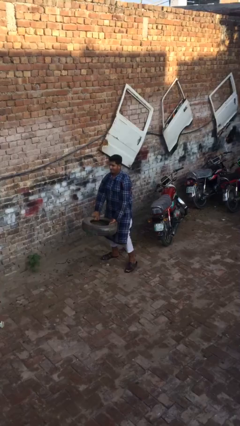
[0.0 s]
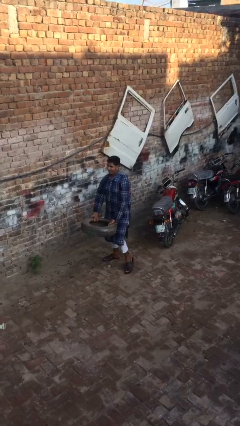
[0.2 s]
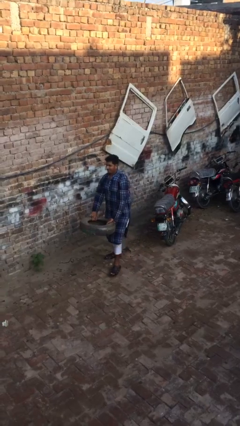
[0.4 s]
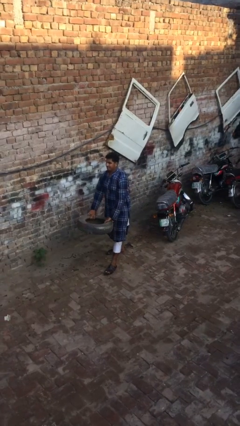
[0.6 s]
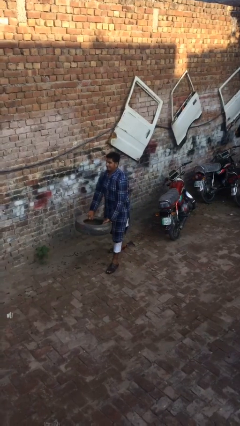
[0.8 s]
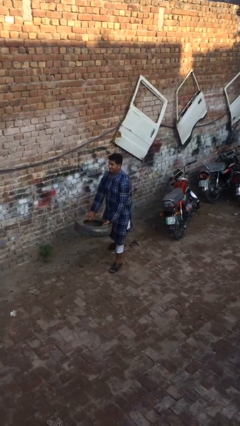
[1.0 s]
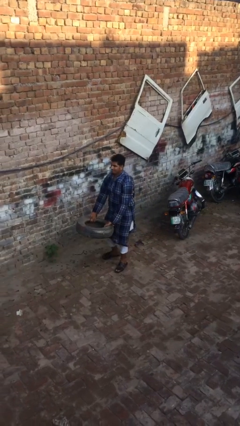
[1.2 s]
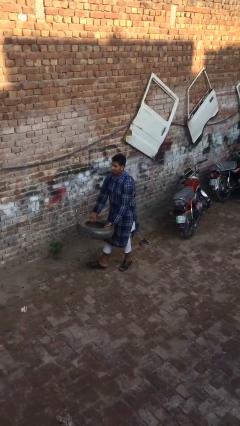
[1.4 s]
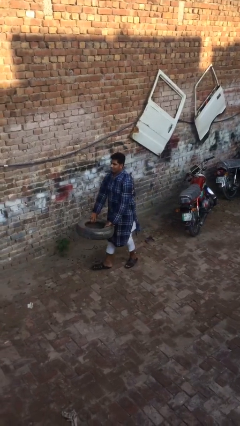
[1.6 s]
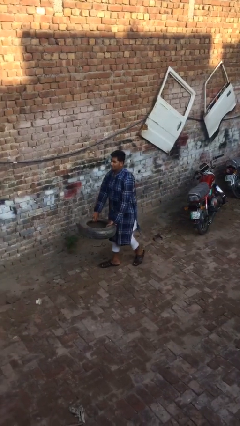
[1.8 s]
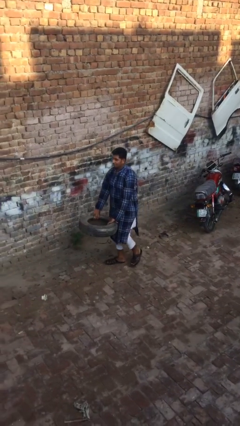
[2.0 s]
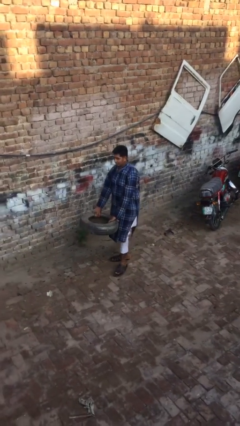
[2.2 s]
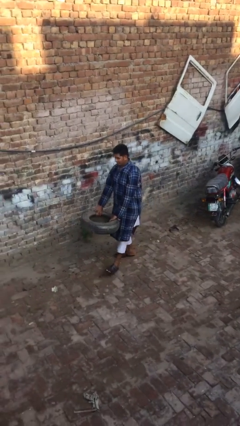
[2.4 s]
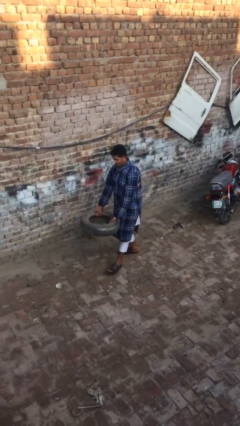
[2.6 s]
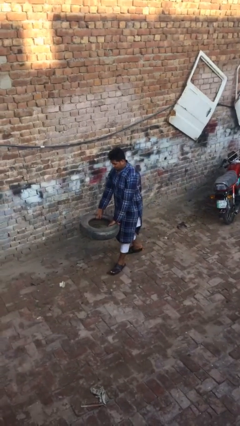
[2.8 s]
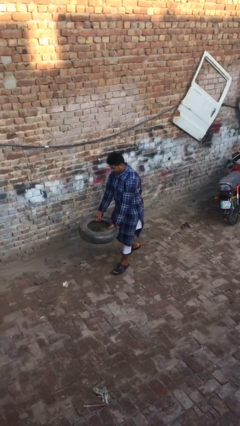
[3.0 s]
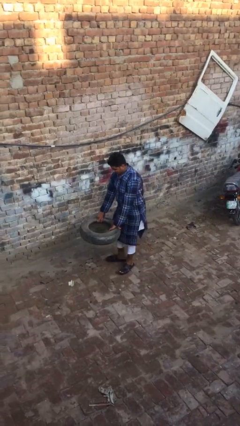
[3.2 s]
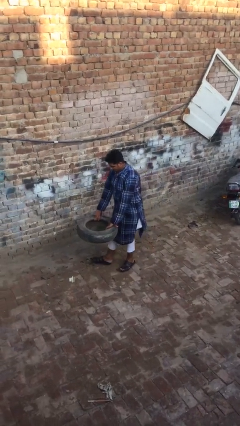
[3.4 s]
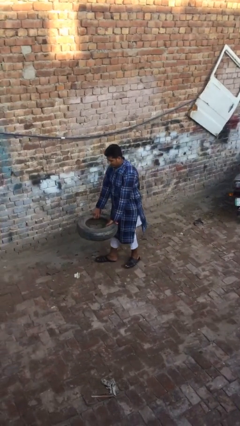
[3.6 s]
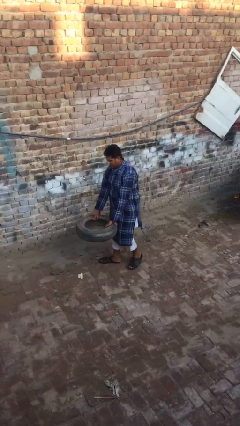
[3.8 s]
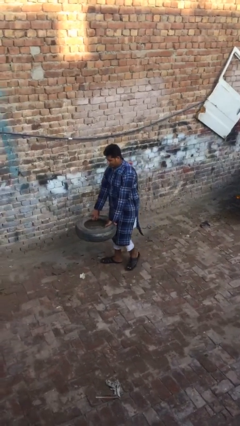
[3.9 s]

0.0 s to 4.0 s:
person carries heavy object

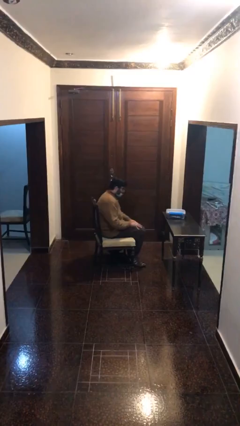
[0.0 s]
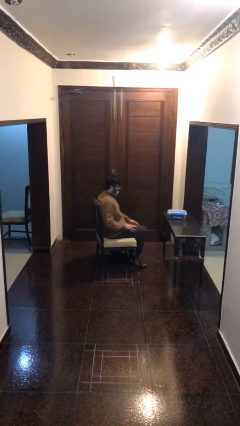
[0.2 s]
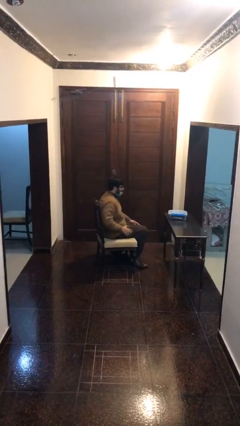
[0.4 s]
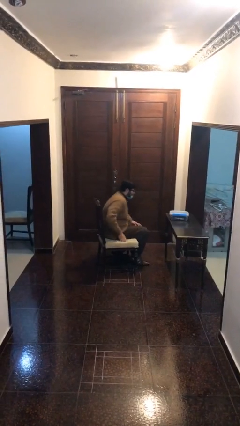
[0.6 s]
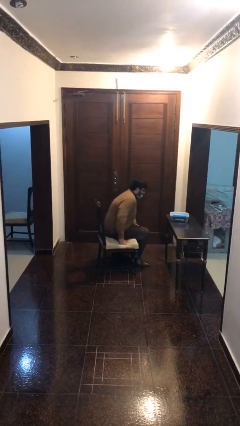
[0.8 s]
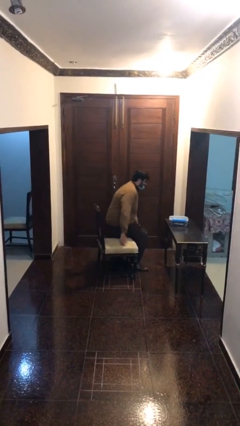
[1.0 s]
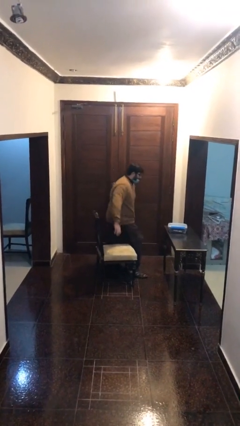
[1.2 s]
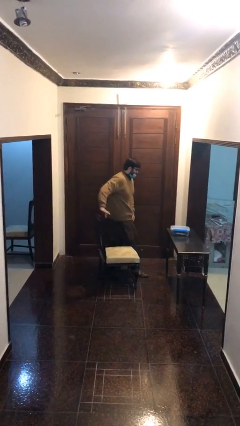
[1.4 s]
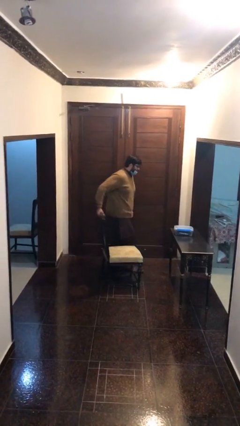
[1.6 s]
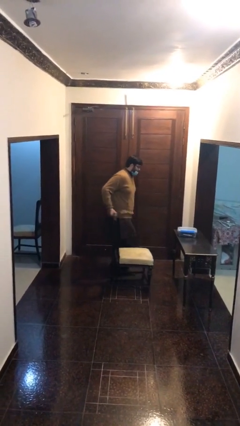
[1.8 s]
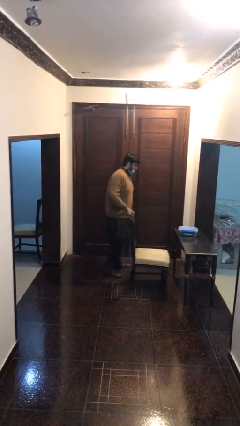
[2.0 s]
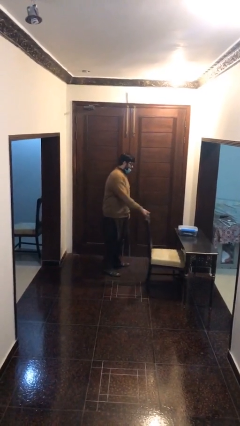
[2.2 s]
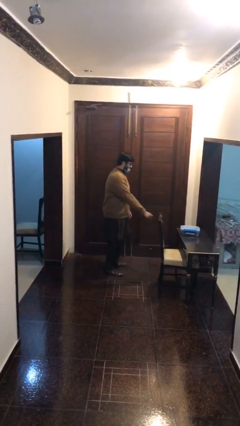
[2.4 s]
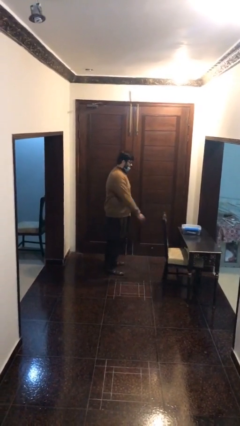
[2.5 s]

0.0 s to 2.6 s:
person stands up

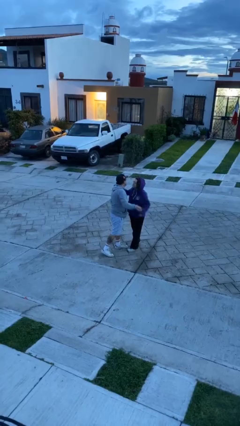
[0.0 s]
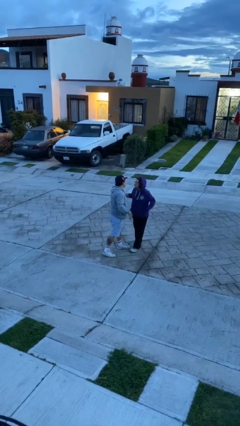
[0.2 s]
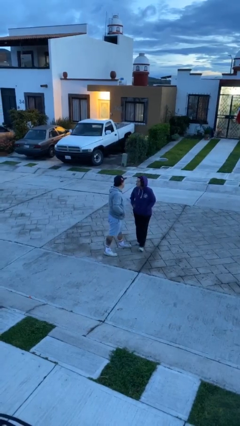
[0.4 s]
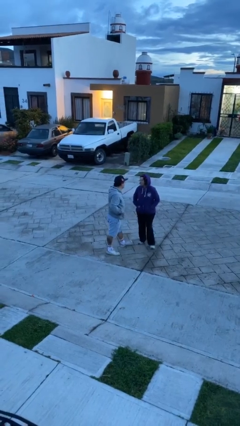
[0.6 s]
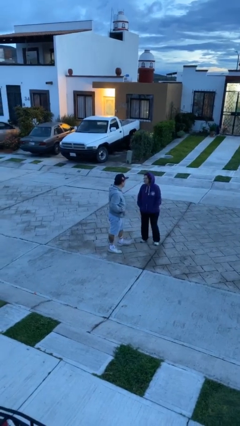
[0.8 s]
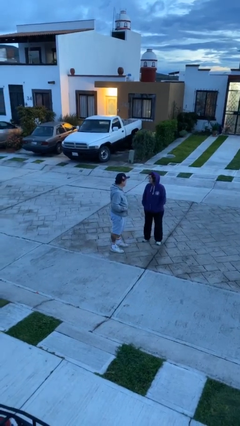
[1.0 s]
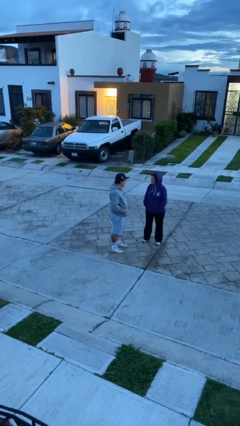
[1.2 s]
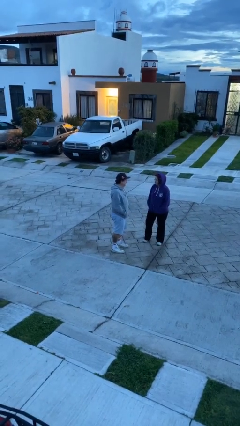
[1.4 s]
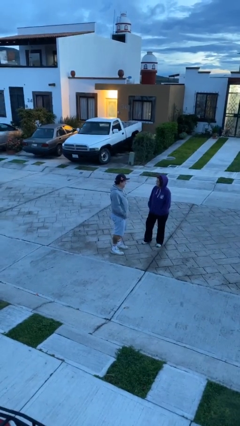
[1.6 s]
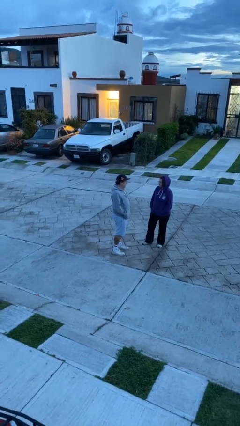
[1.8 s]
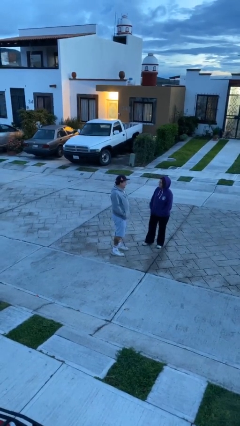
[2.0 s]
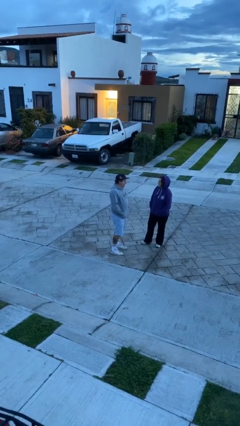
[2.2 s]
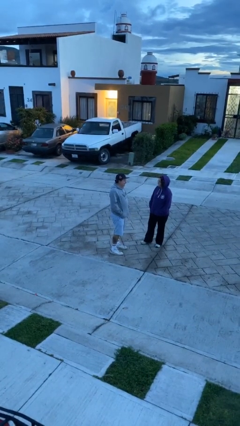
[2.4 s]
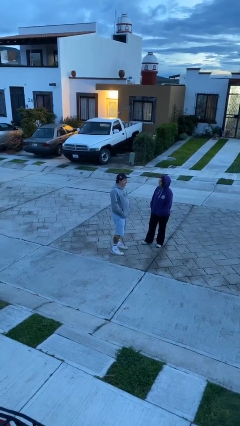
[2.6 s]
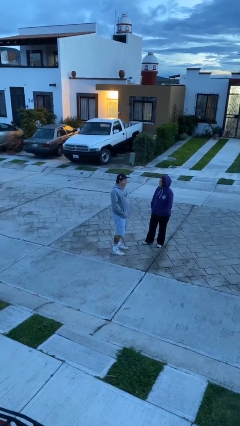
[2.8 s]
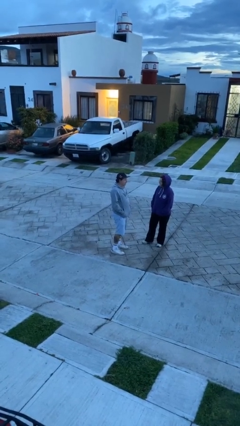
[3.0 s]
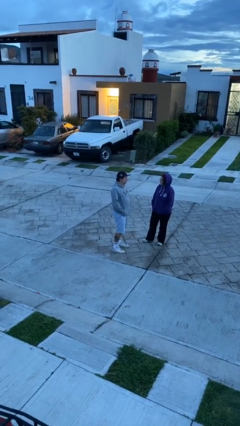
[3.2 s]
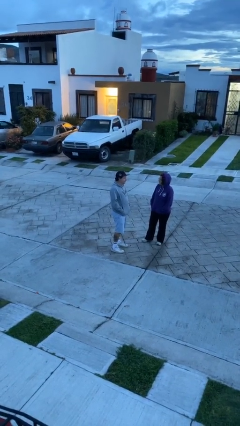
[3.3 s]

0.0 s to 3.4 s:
person talks to person

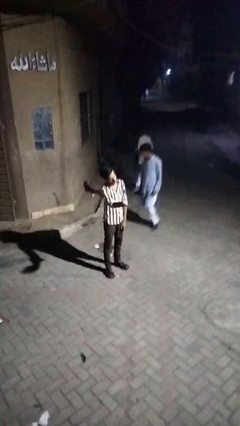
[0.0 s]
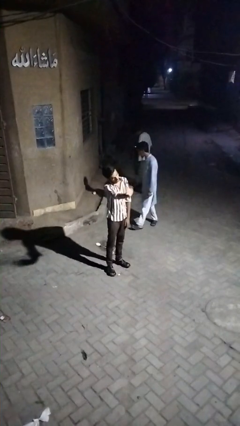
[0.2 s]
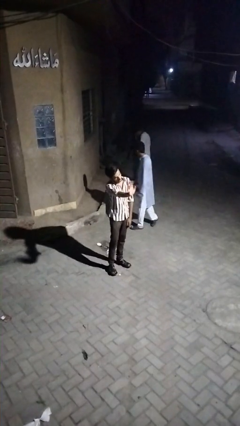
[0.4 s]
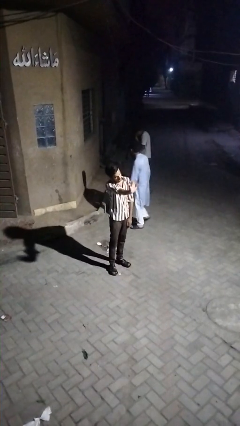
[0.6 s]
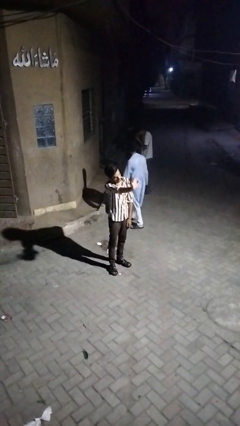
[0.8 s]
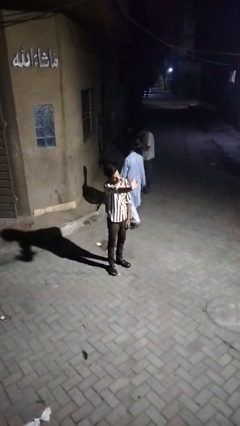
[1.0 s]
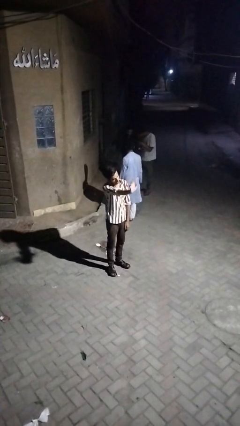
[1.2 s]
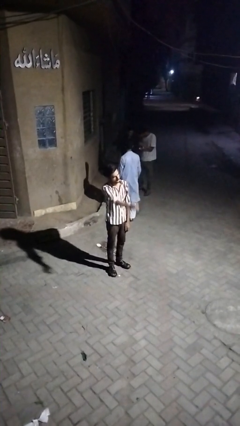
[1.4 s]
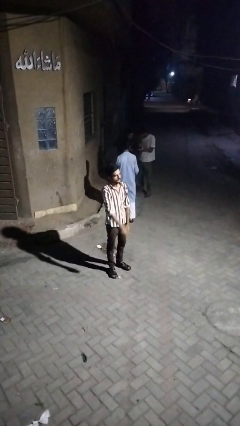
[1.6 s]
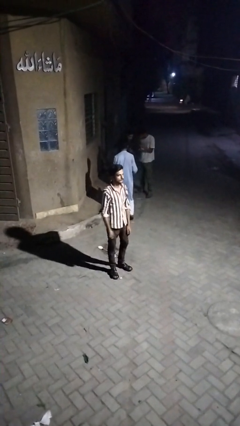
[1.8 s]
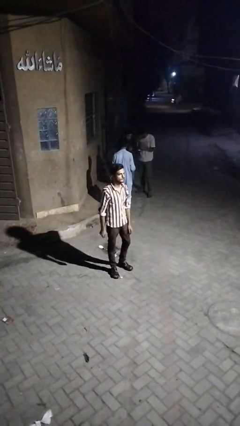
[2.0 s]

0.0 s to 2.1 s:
person waves at person

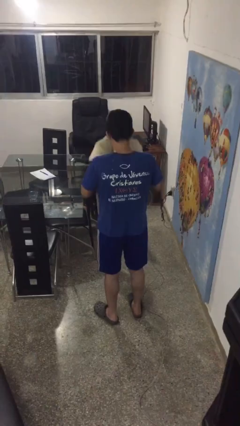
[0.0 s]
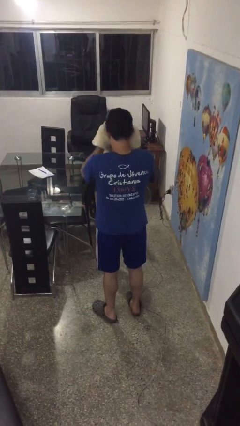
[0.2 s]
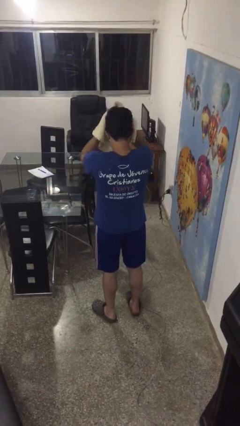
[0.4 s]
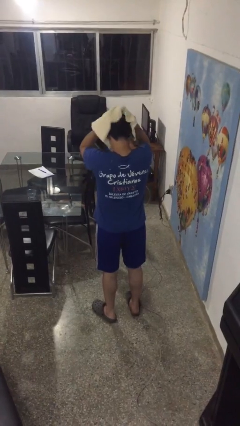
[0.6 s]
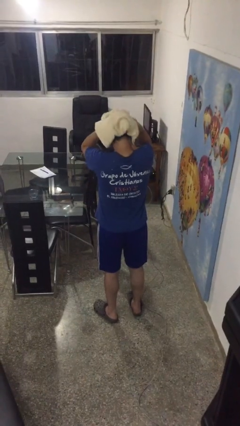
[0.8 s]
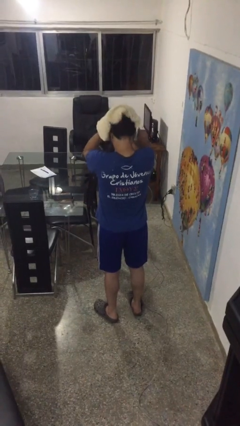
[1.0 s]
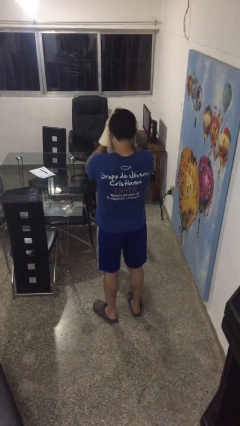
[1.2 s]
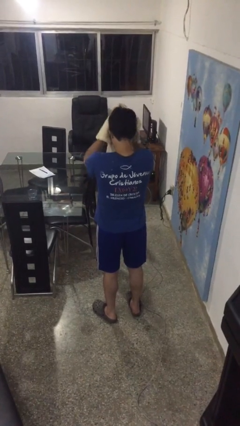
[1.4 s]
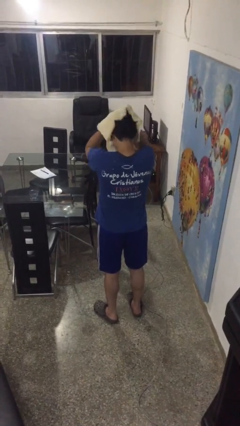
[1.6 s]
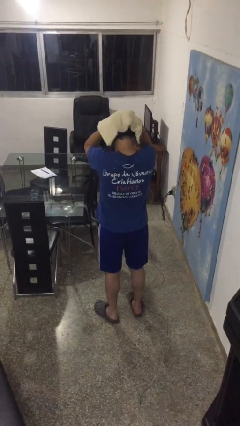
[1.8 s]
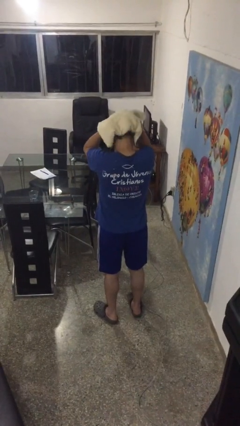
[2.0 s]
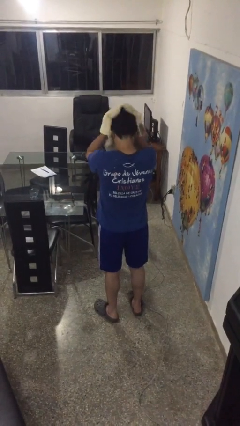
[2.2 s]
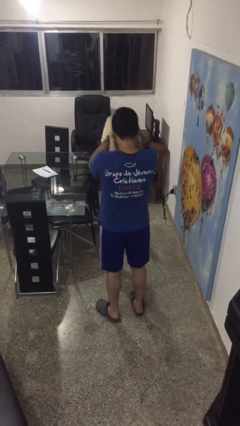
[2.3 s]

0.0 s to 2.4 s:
person dries hair with towel

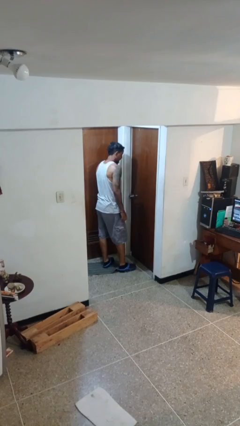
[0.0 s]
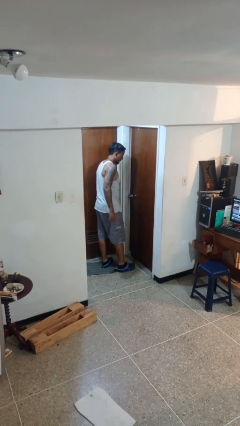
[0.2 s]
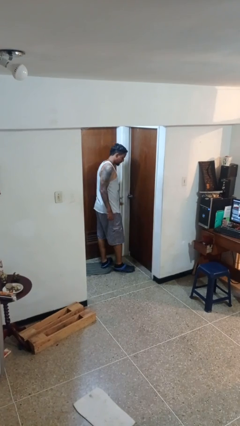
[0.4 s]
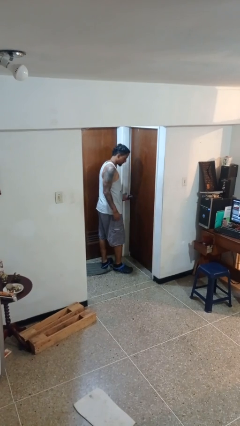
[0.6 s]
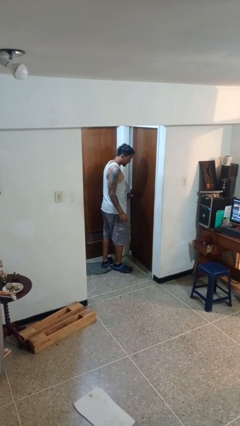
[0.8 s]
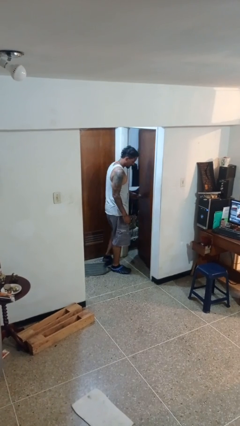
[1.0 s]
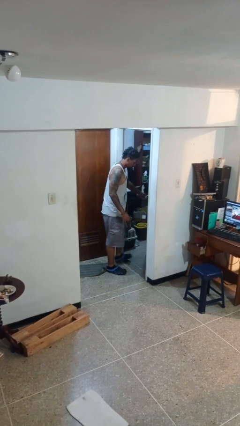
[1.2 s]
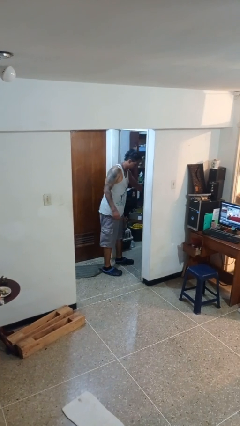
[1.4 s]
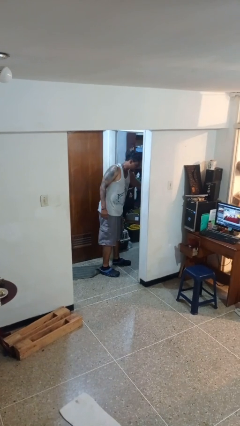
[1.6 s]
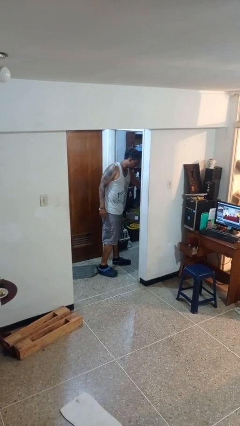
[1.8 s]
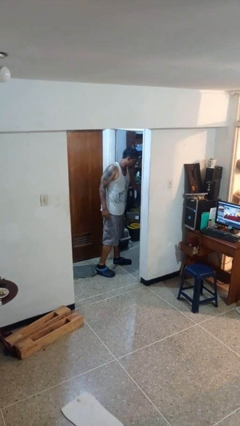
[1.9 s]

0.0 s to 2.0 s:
person opens gate

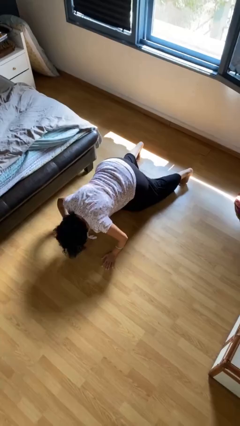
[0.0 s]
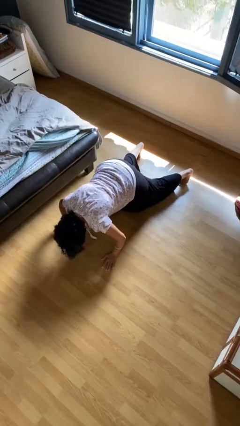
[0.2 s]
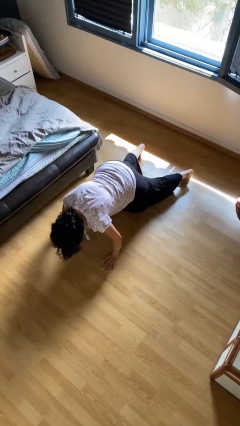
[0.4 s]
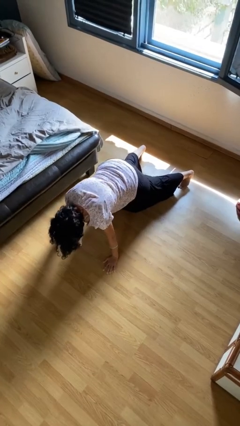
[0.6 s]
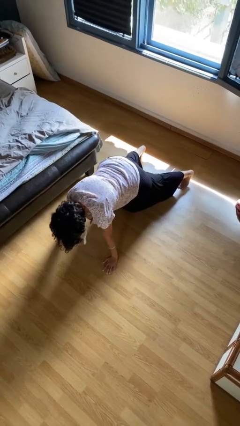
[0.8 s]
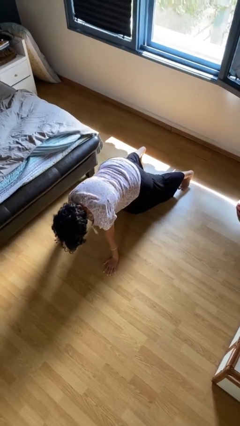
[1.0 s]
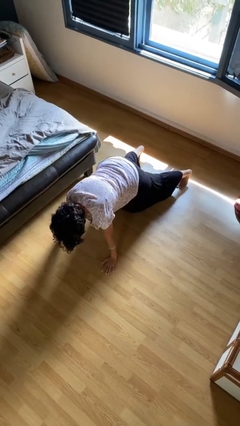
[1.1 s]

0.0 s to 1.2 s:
person exercises with pushup
